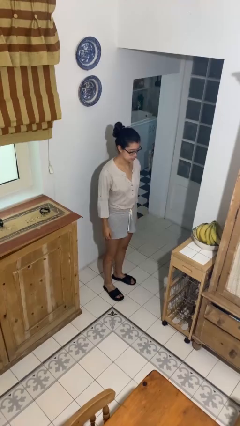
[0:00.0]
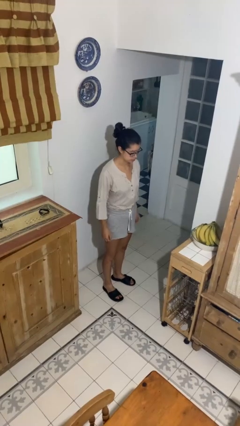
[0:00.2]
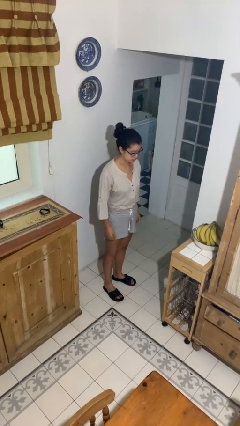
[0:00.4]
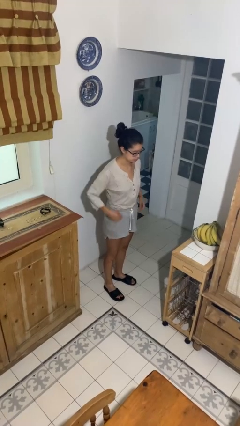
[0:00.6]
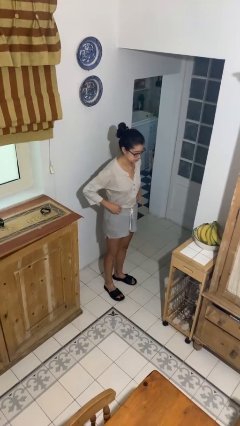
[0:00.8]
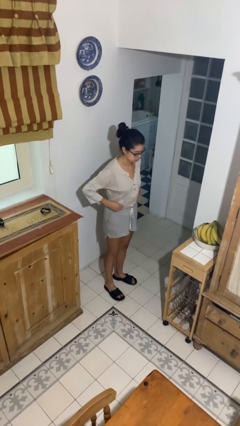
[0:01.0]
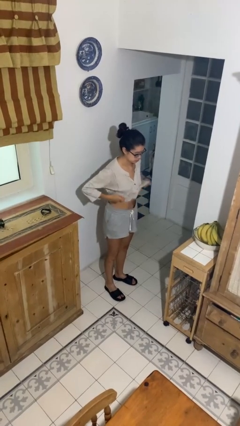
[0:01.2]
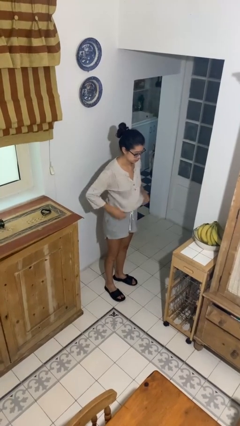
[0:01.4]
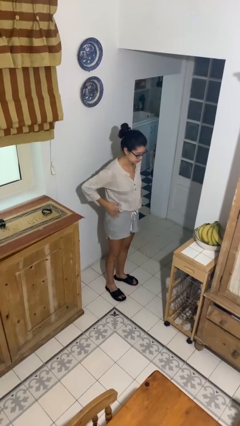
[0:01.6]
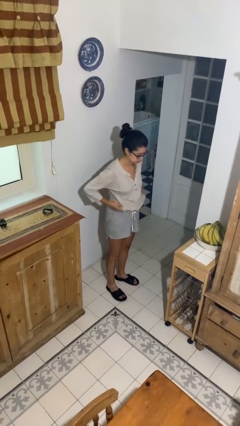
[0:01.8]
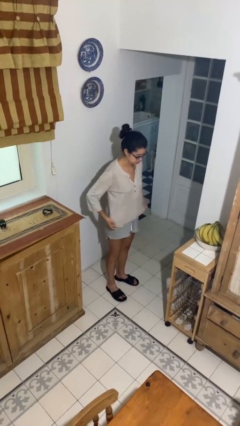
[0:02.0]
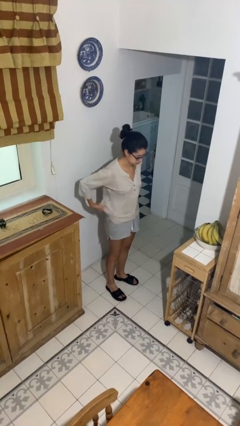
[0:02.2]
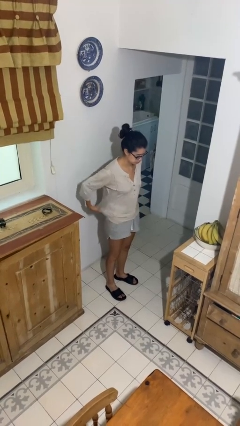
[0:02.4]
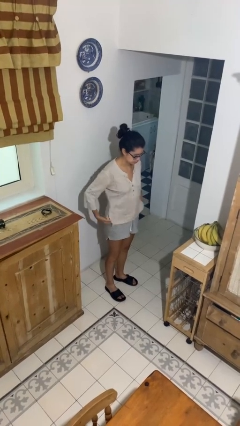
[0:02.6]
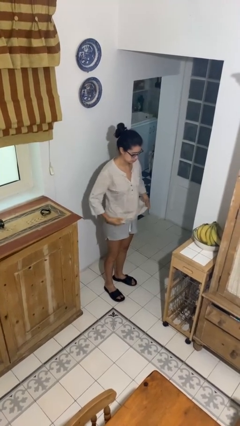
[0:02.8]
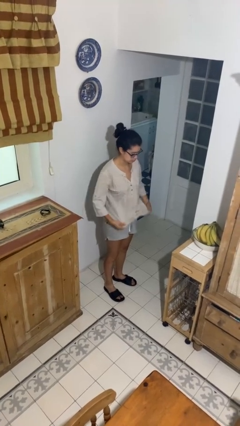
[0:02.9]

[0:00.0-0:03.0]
person untucks shirt

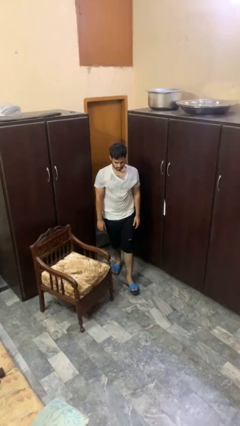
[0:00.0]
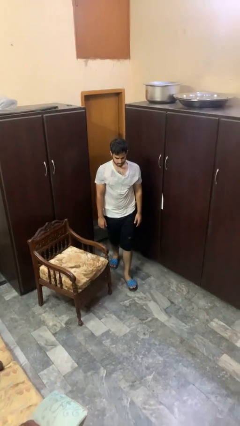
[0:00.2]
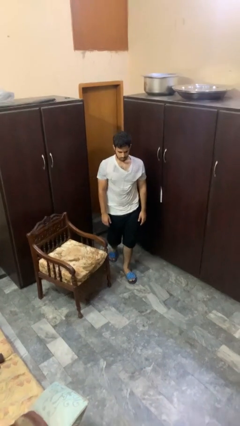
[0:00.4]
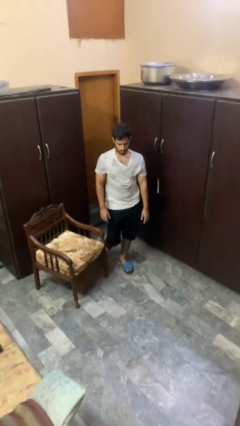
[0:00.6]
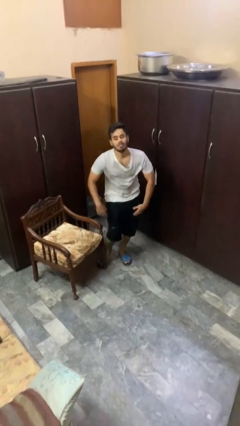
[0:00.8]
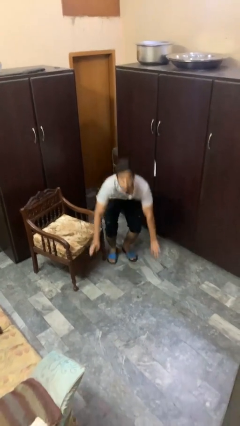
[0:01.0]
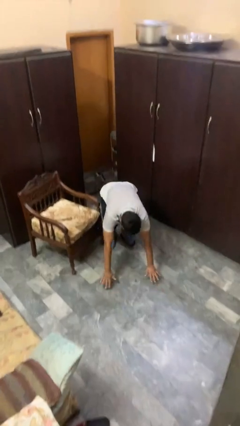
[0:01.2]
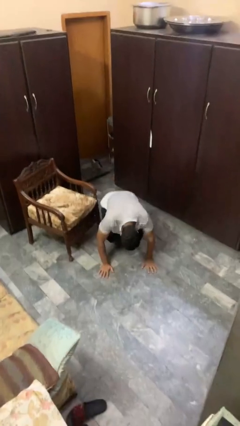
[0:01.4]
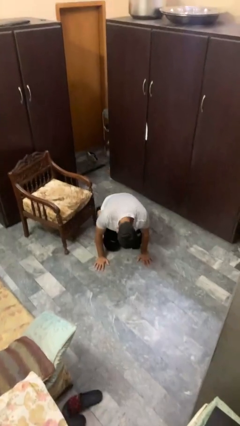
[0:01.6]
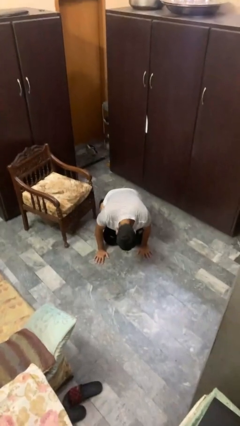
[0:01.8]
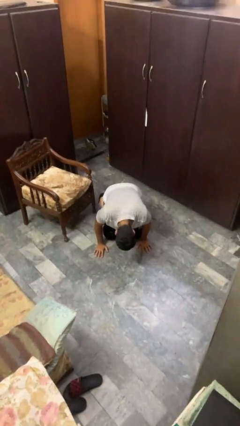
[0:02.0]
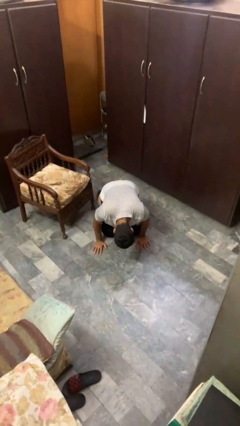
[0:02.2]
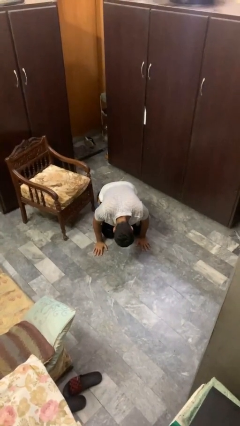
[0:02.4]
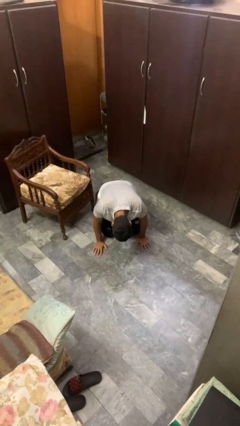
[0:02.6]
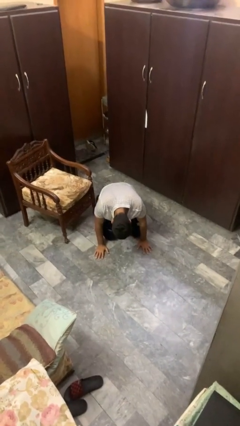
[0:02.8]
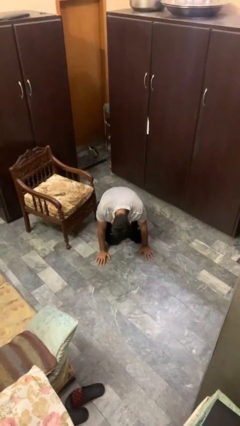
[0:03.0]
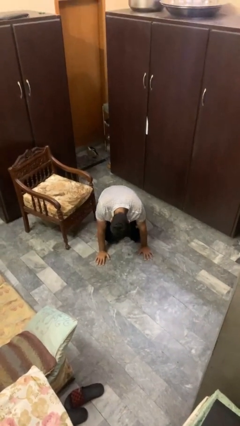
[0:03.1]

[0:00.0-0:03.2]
person trips on object on floor

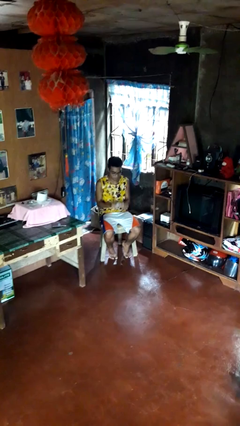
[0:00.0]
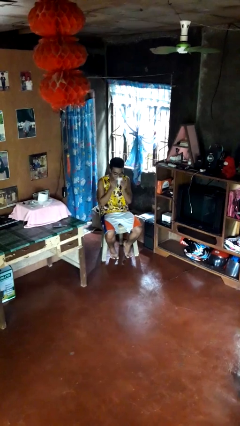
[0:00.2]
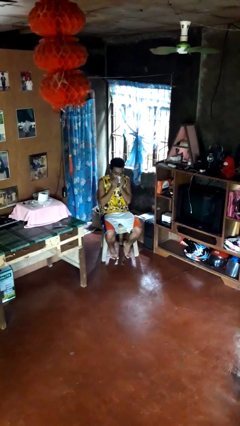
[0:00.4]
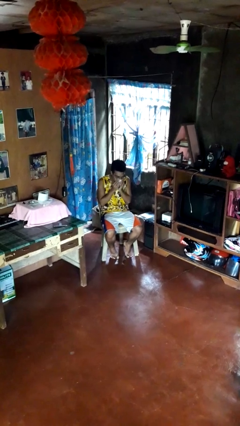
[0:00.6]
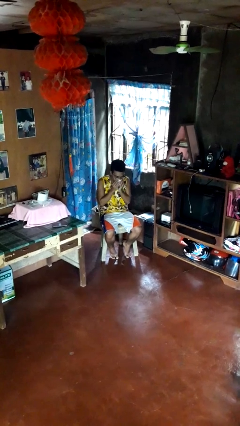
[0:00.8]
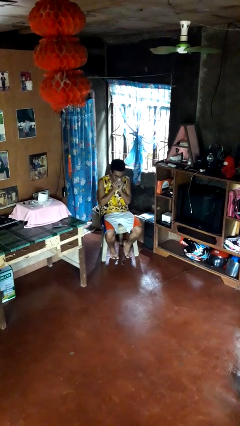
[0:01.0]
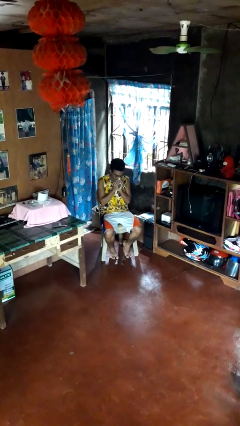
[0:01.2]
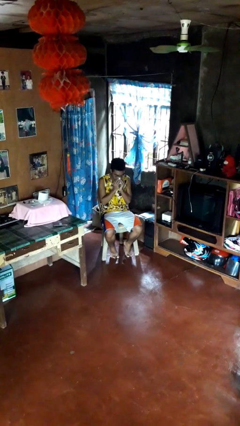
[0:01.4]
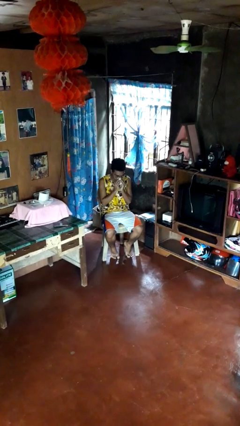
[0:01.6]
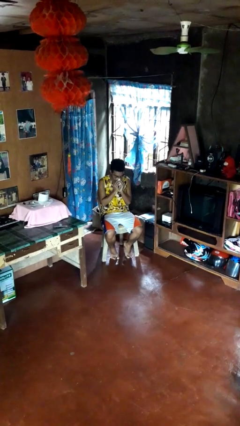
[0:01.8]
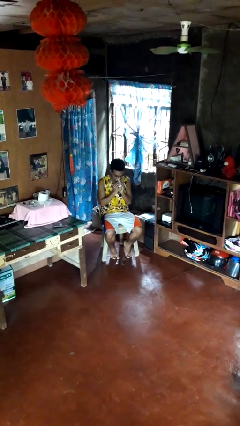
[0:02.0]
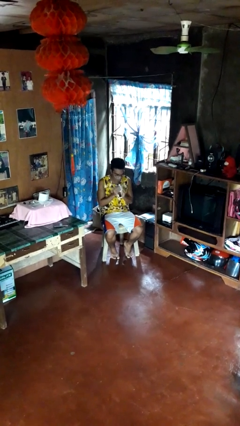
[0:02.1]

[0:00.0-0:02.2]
person blows nose

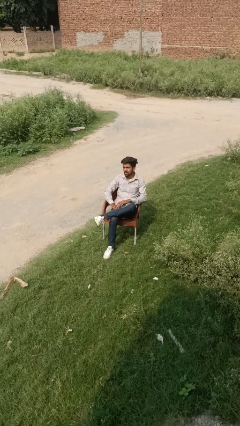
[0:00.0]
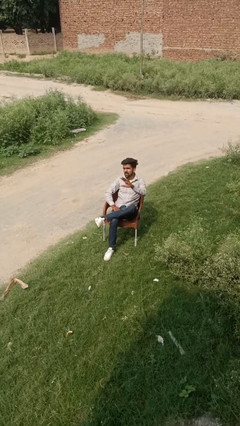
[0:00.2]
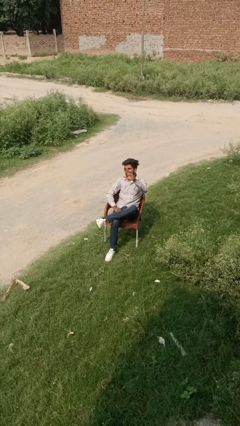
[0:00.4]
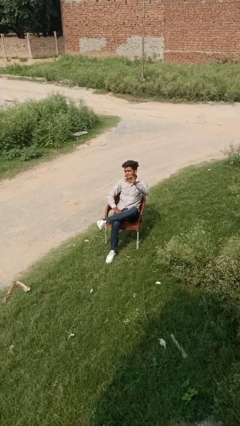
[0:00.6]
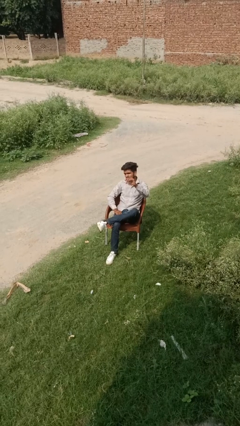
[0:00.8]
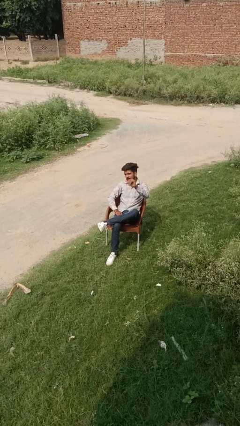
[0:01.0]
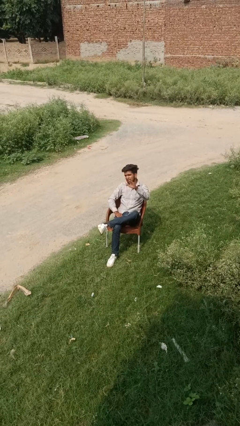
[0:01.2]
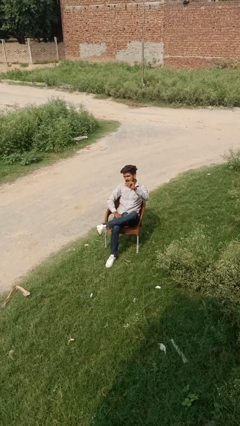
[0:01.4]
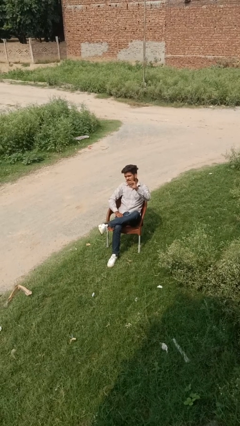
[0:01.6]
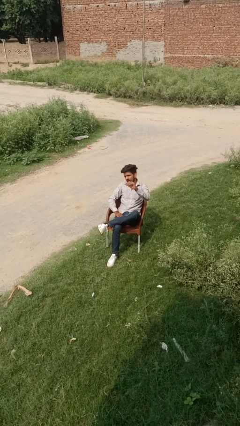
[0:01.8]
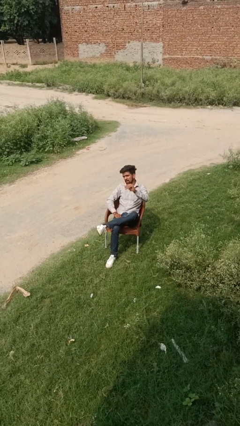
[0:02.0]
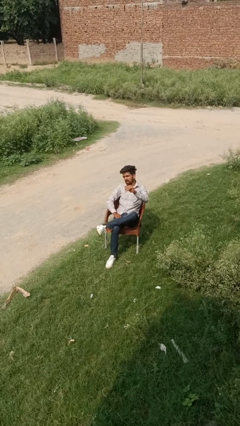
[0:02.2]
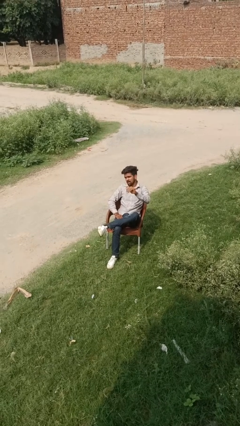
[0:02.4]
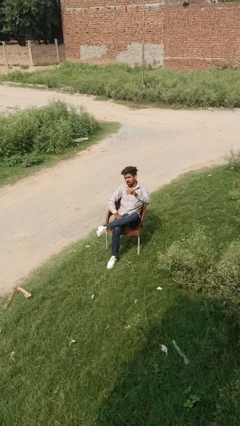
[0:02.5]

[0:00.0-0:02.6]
person gestures come here

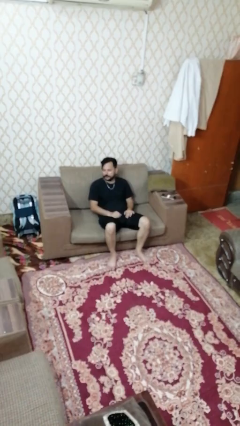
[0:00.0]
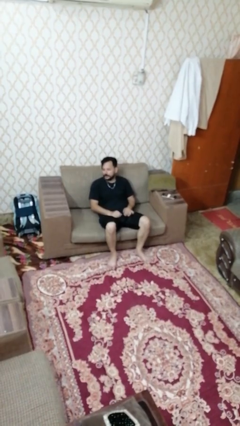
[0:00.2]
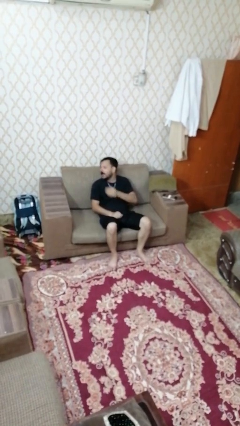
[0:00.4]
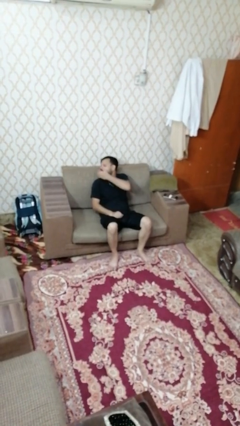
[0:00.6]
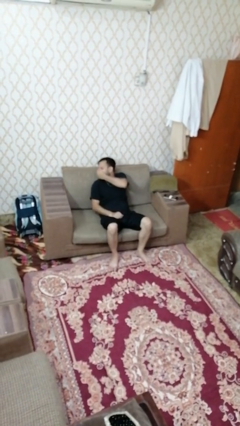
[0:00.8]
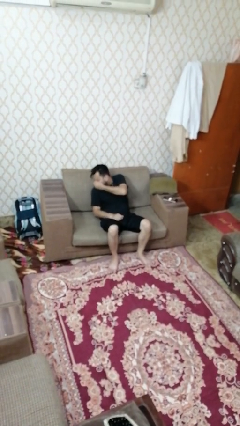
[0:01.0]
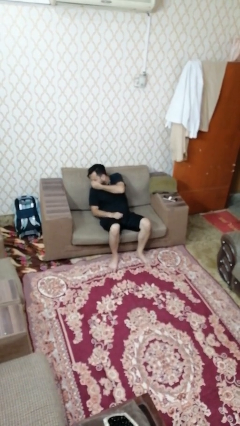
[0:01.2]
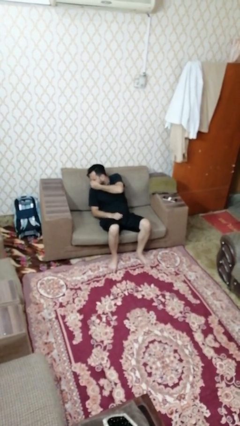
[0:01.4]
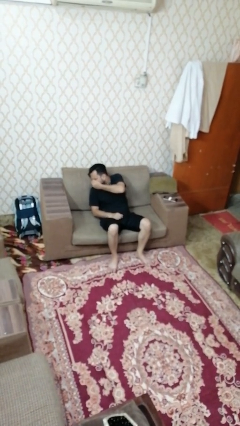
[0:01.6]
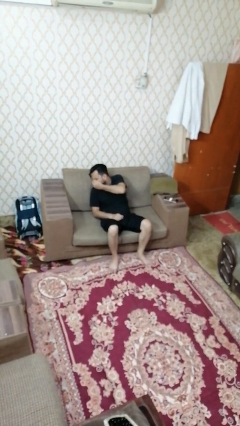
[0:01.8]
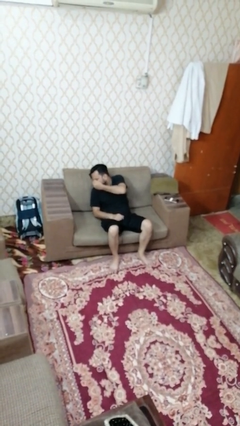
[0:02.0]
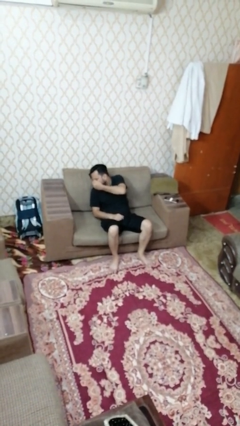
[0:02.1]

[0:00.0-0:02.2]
person sneezes into hand

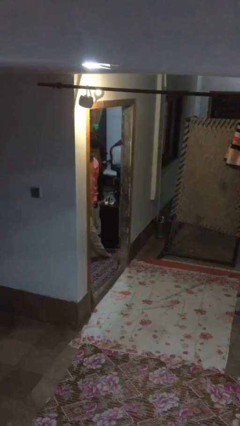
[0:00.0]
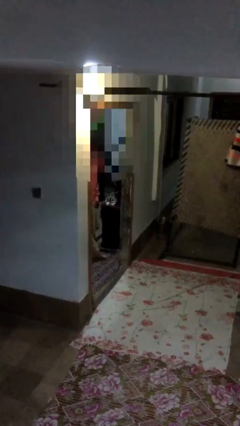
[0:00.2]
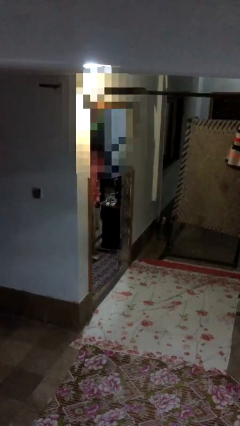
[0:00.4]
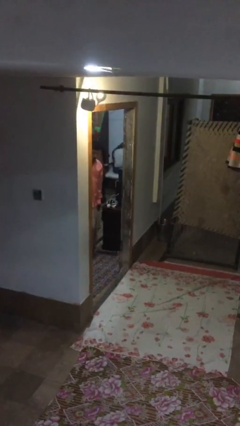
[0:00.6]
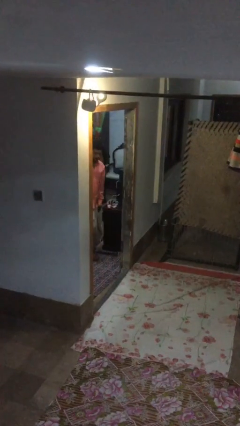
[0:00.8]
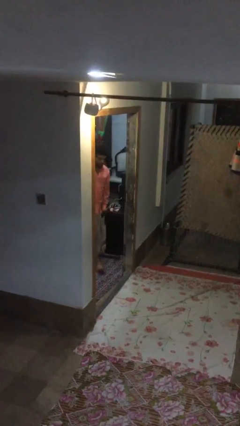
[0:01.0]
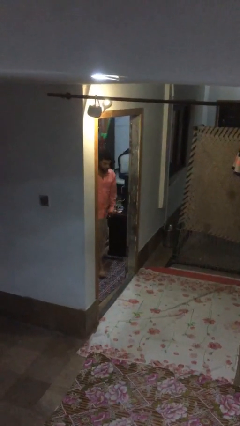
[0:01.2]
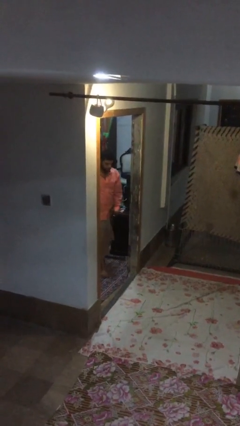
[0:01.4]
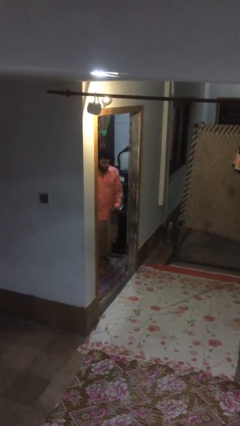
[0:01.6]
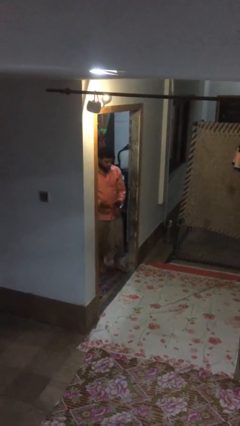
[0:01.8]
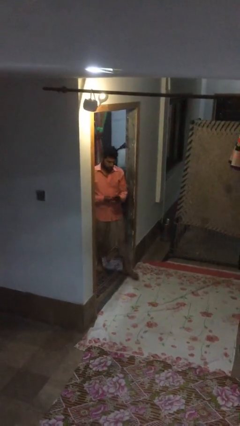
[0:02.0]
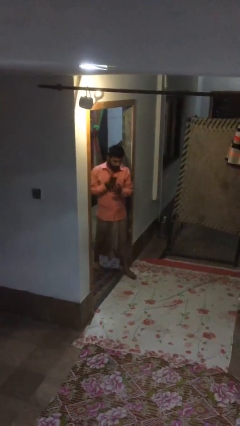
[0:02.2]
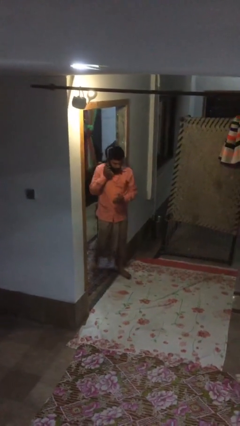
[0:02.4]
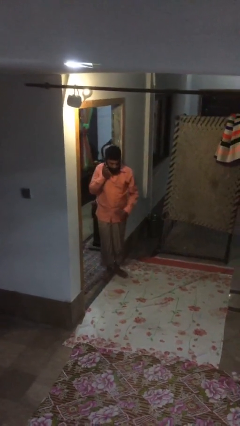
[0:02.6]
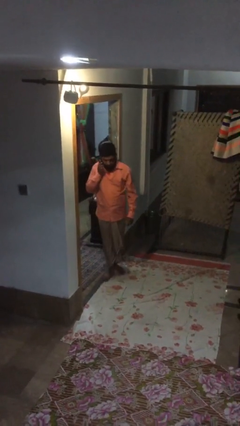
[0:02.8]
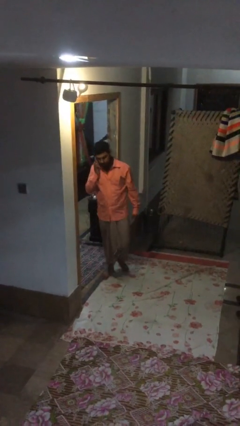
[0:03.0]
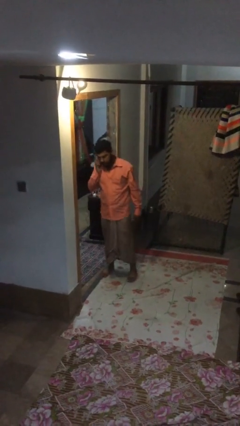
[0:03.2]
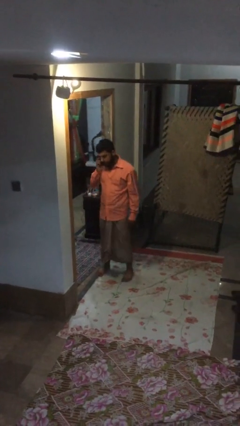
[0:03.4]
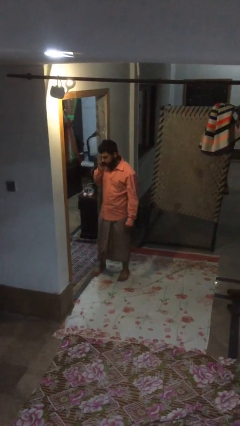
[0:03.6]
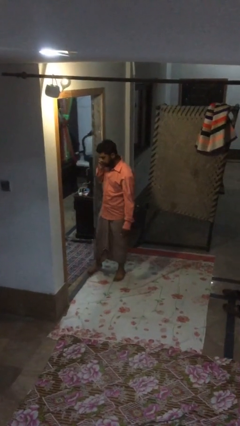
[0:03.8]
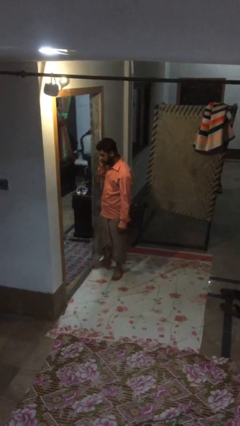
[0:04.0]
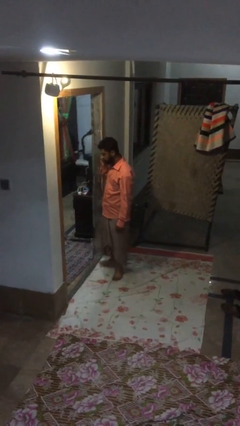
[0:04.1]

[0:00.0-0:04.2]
person enters scene through structure

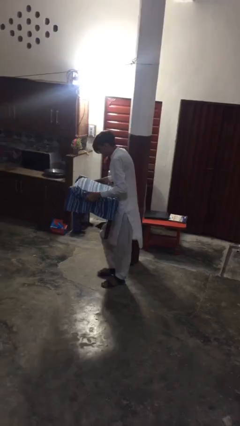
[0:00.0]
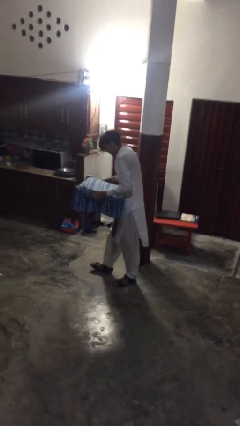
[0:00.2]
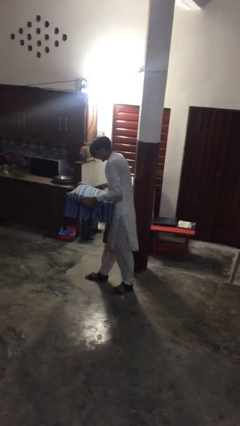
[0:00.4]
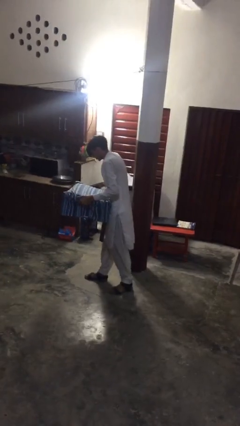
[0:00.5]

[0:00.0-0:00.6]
person puts down object on floor
